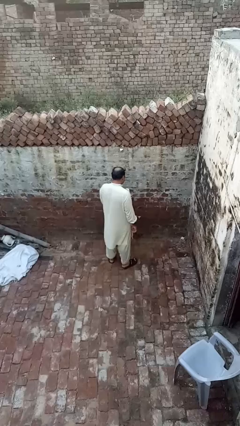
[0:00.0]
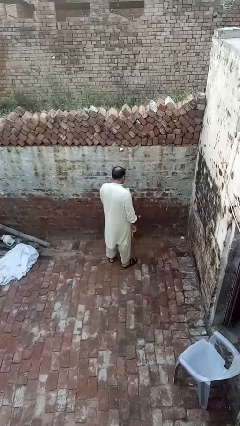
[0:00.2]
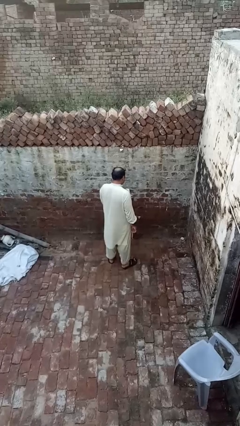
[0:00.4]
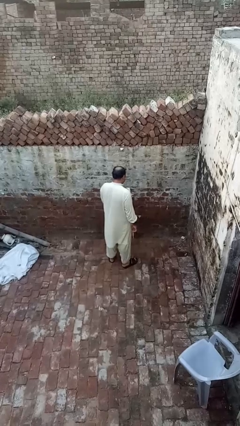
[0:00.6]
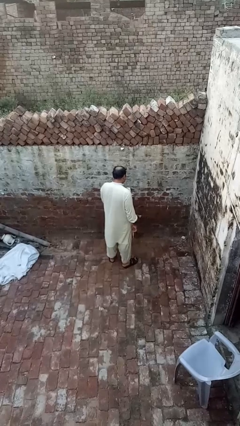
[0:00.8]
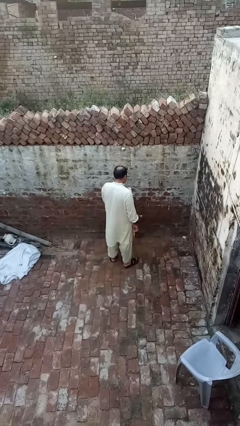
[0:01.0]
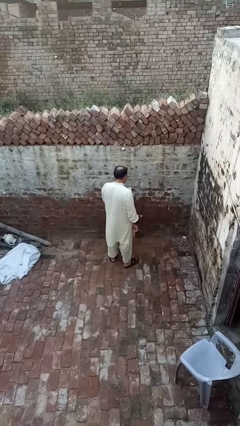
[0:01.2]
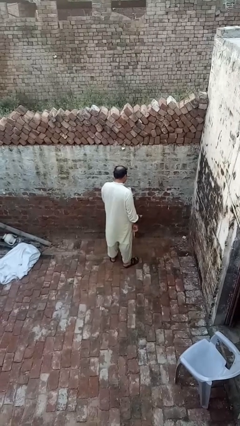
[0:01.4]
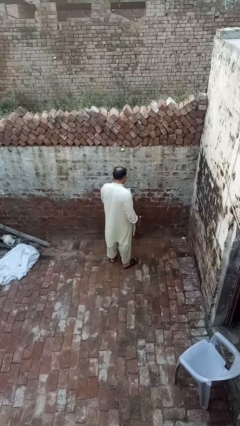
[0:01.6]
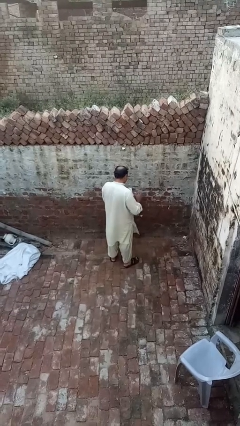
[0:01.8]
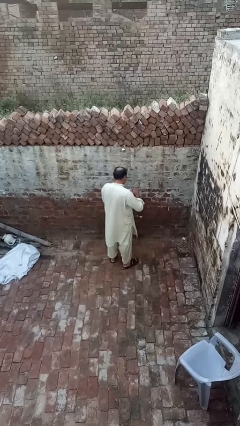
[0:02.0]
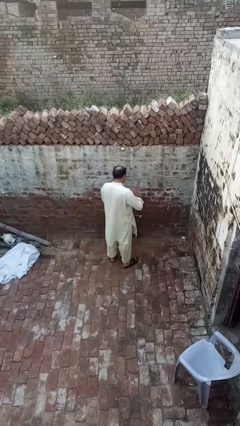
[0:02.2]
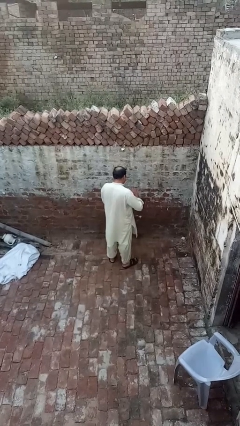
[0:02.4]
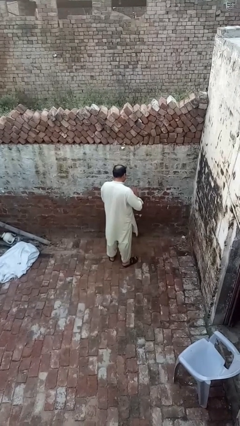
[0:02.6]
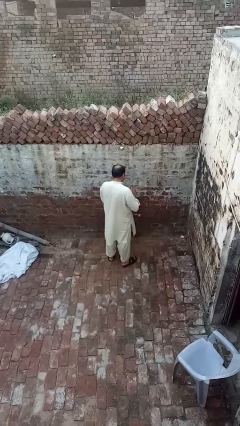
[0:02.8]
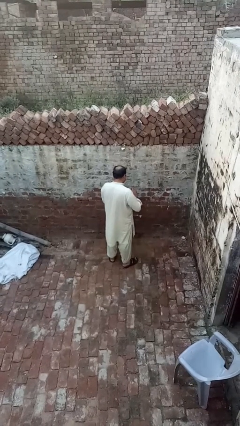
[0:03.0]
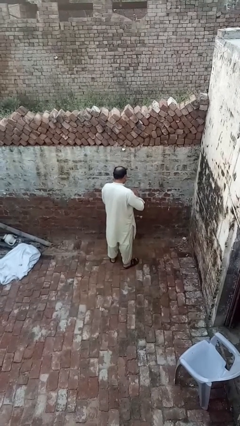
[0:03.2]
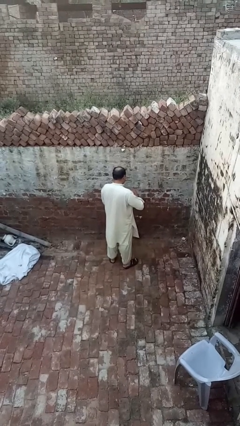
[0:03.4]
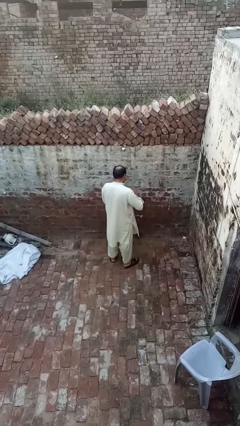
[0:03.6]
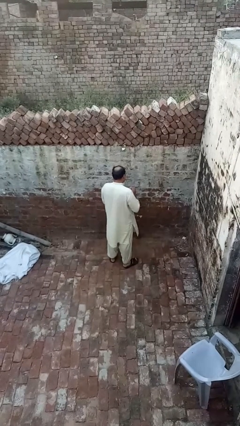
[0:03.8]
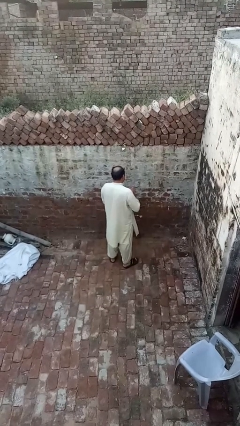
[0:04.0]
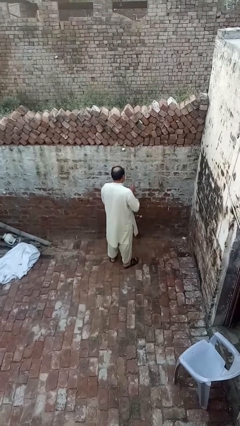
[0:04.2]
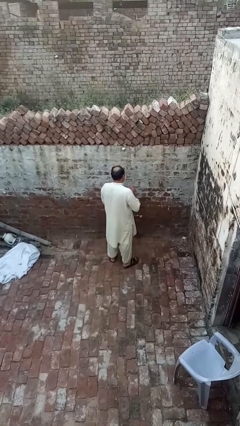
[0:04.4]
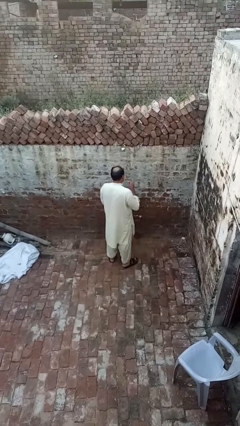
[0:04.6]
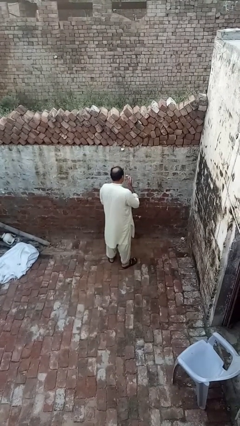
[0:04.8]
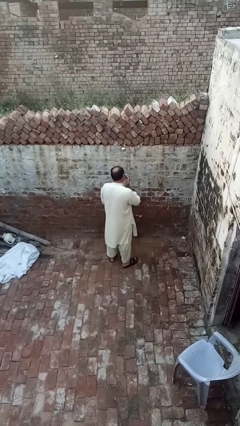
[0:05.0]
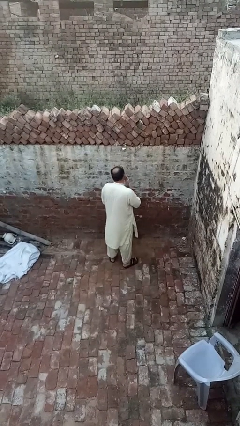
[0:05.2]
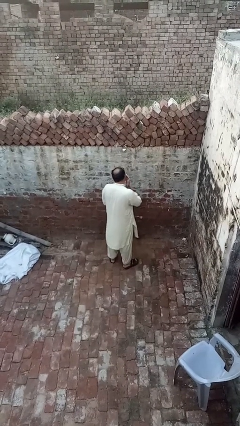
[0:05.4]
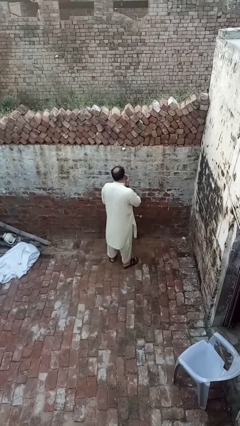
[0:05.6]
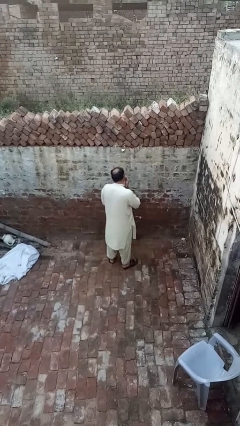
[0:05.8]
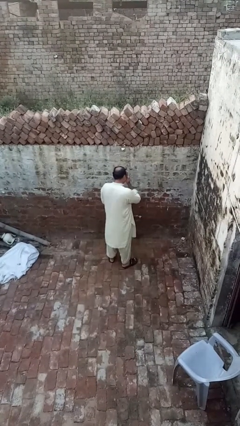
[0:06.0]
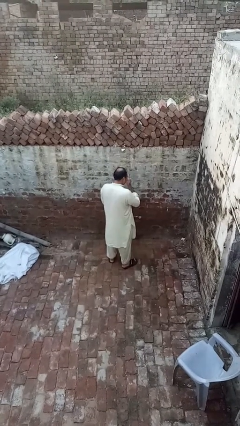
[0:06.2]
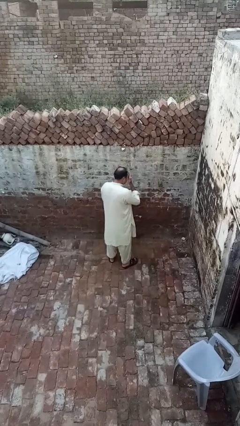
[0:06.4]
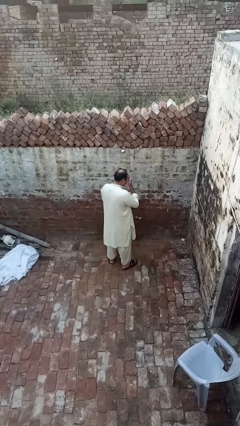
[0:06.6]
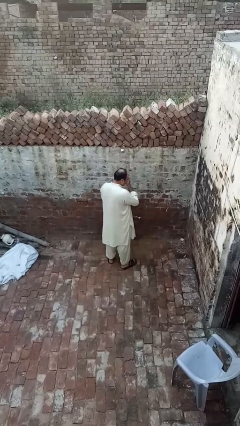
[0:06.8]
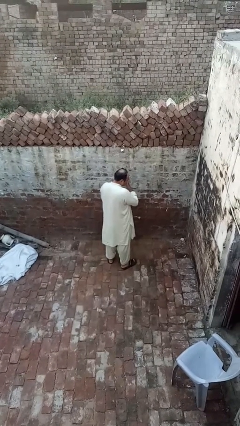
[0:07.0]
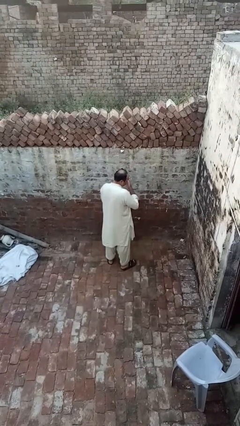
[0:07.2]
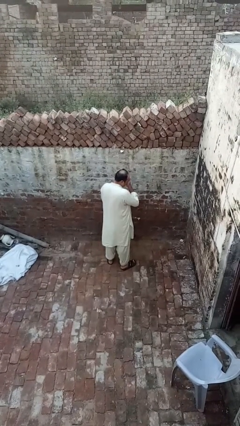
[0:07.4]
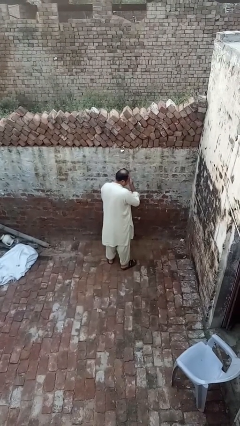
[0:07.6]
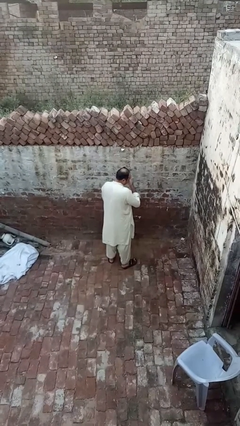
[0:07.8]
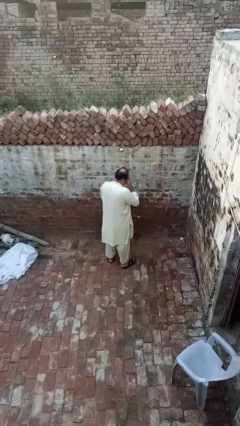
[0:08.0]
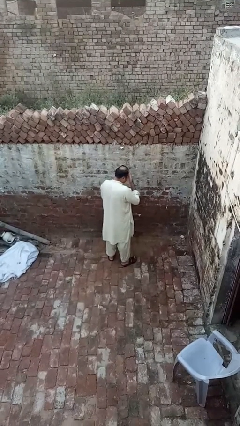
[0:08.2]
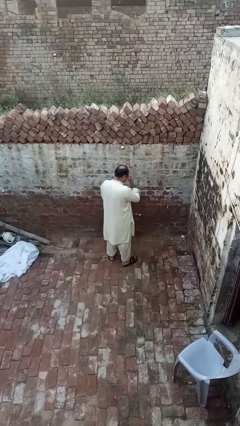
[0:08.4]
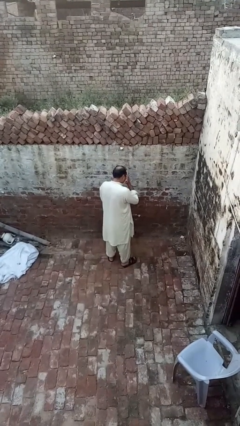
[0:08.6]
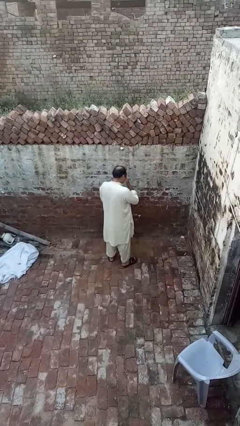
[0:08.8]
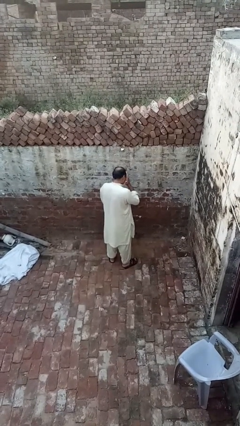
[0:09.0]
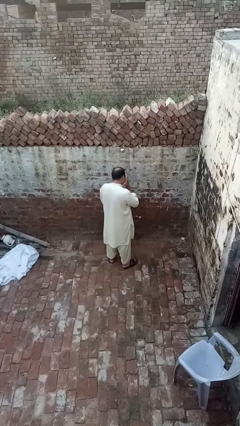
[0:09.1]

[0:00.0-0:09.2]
person applies facial moisturizer

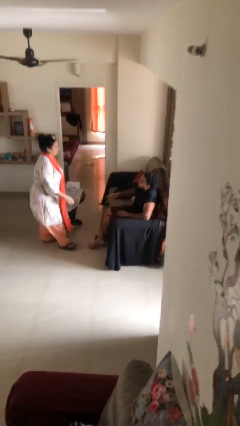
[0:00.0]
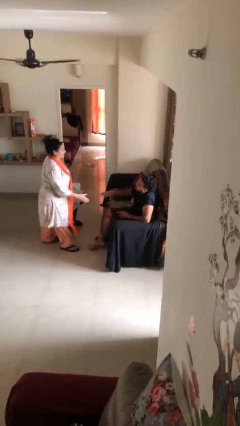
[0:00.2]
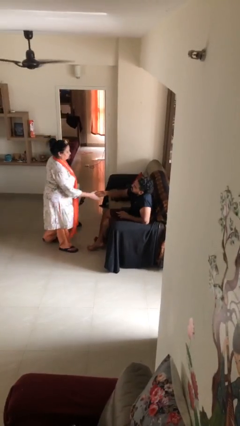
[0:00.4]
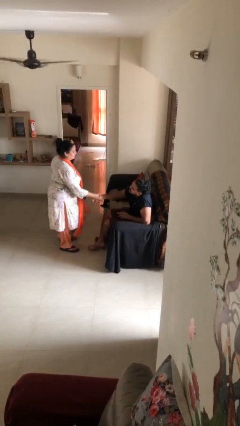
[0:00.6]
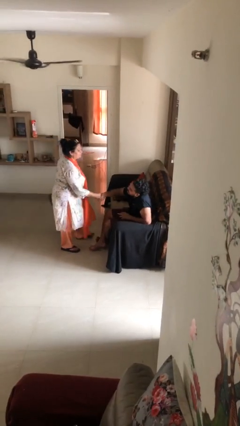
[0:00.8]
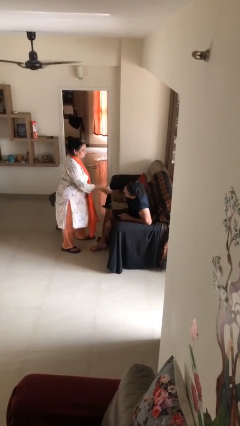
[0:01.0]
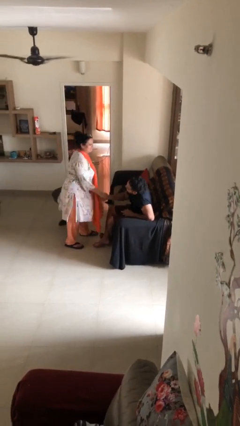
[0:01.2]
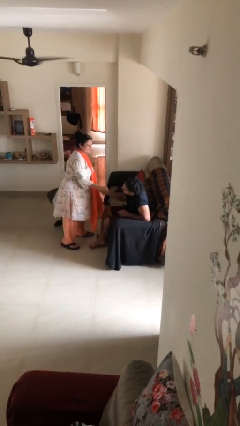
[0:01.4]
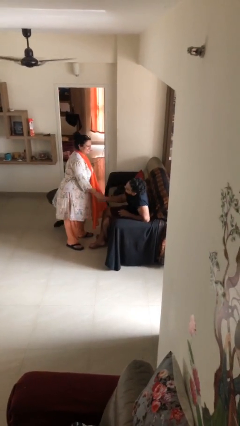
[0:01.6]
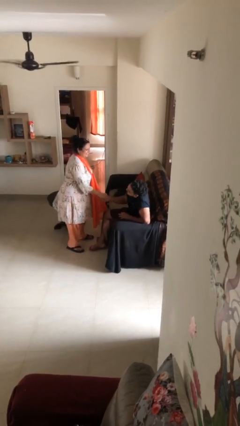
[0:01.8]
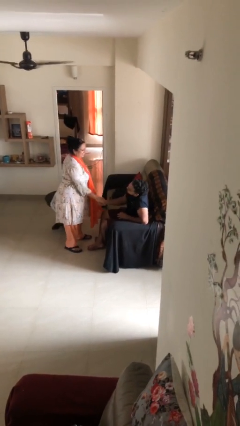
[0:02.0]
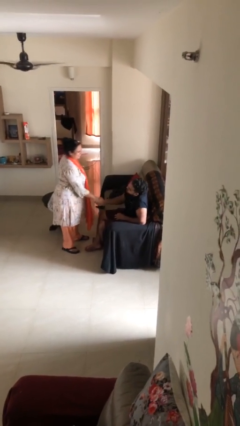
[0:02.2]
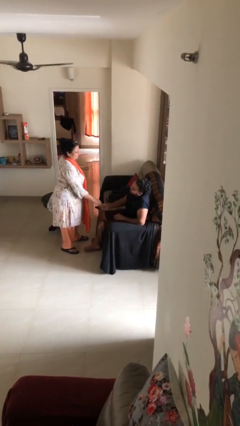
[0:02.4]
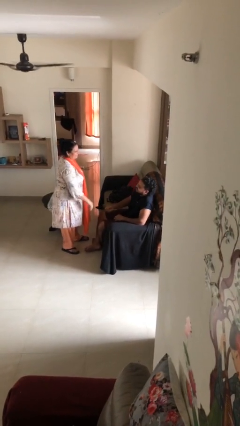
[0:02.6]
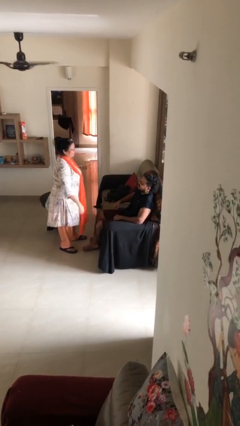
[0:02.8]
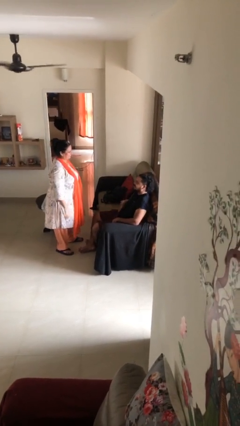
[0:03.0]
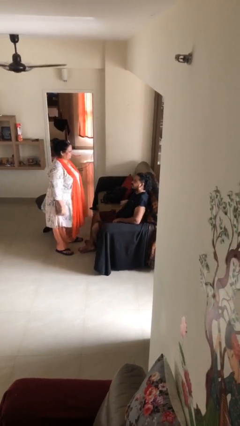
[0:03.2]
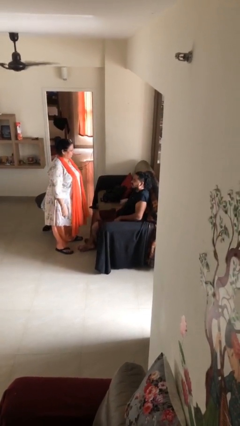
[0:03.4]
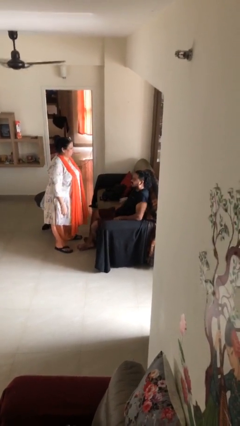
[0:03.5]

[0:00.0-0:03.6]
person shakes hand

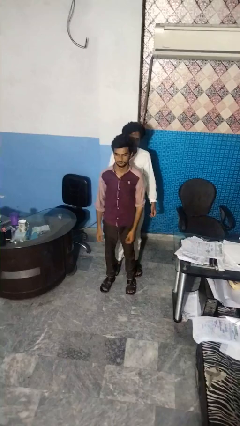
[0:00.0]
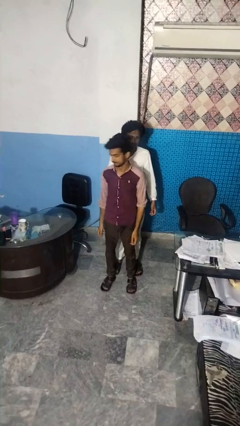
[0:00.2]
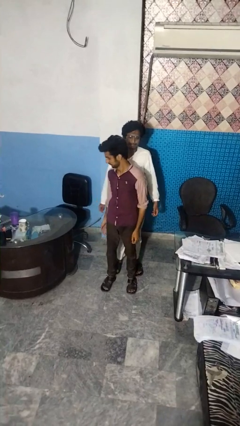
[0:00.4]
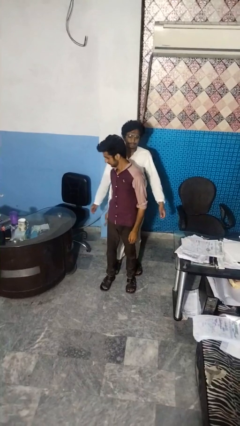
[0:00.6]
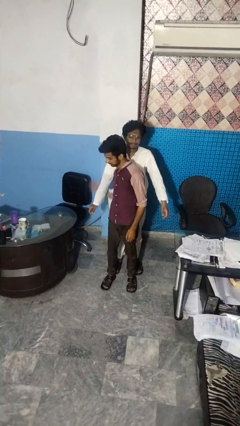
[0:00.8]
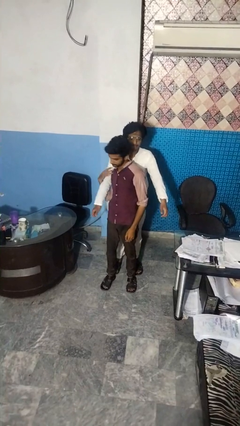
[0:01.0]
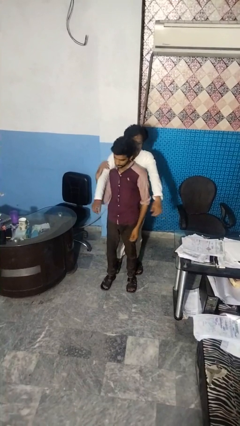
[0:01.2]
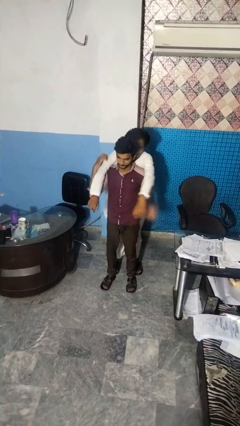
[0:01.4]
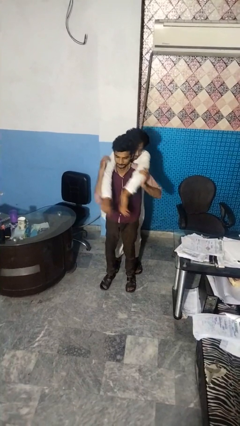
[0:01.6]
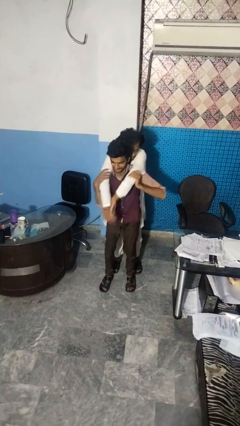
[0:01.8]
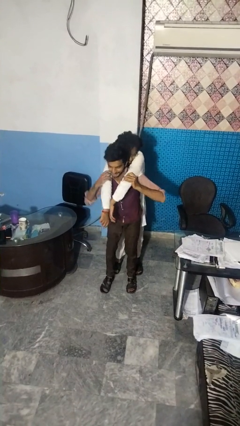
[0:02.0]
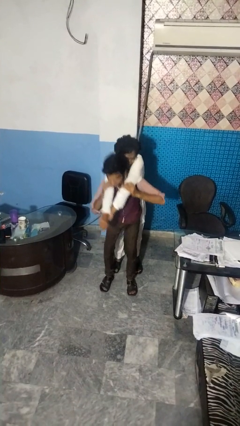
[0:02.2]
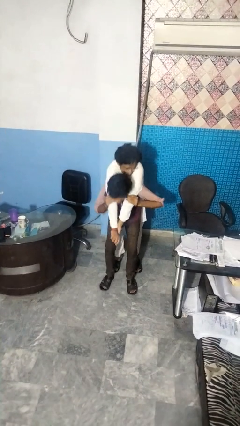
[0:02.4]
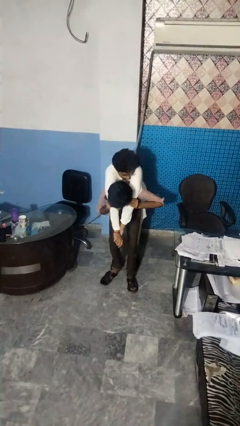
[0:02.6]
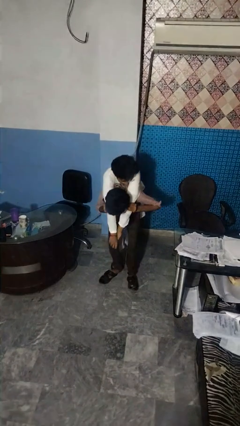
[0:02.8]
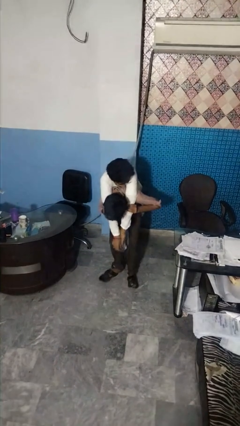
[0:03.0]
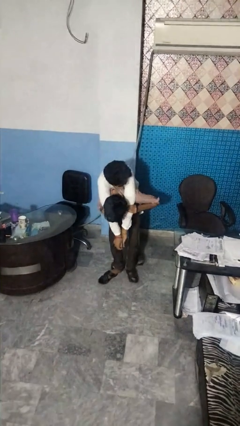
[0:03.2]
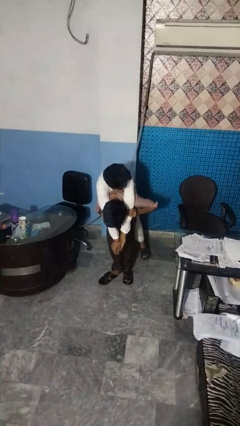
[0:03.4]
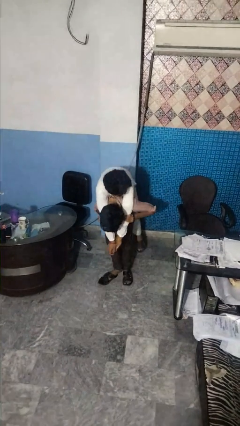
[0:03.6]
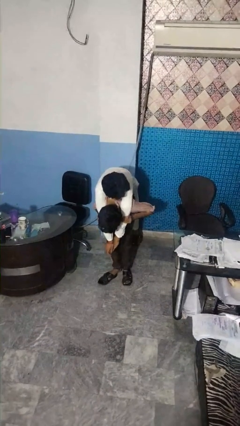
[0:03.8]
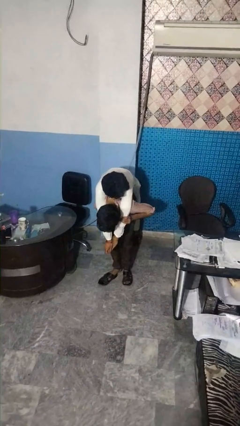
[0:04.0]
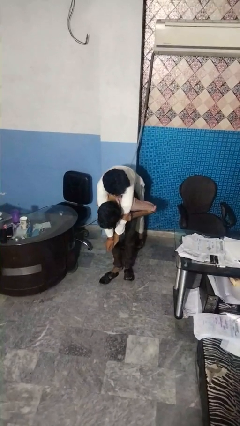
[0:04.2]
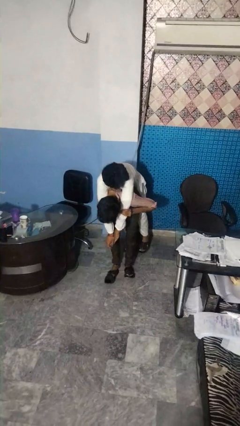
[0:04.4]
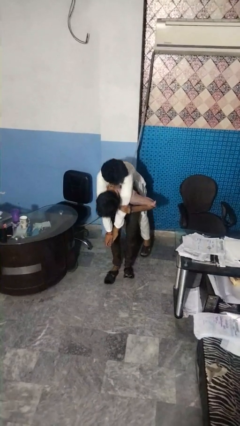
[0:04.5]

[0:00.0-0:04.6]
person carries person over shoulder

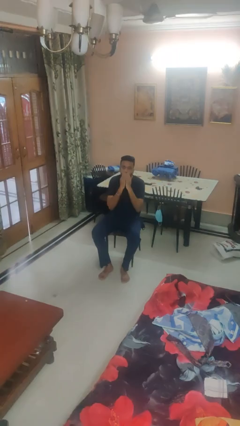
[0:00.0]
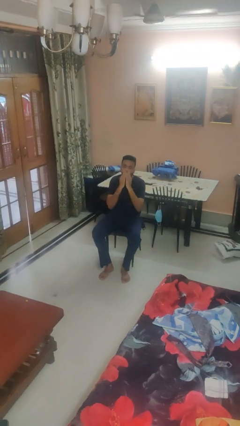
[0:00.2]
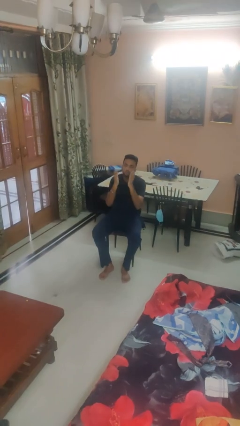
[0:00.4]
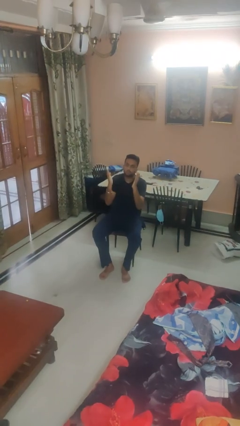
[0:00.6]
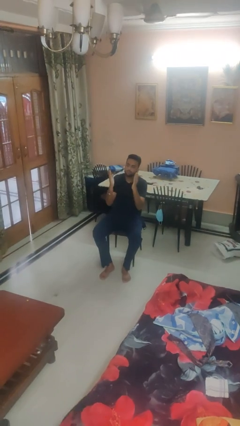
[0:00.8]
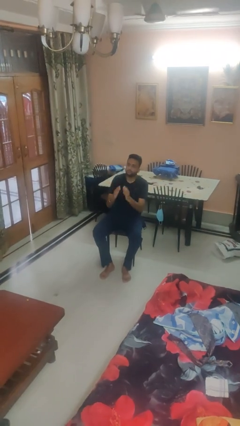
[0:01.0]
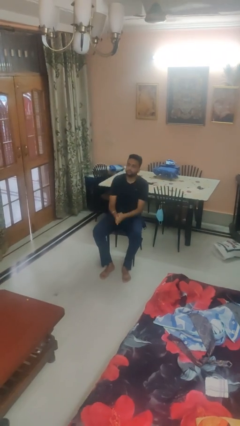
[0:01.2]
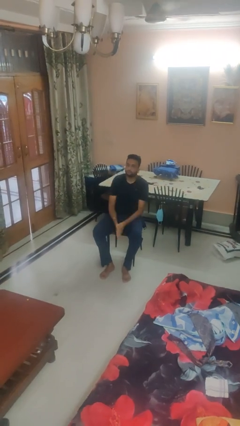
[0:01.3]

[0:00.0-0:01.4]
person gestures blow kiss
